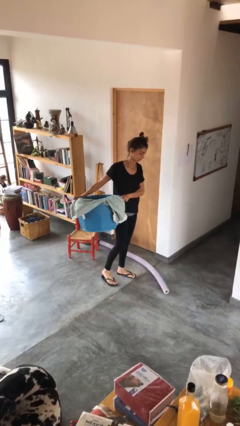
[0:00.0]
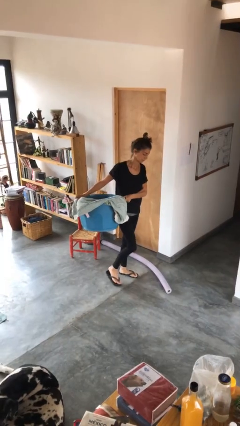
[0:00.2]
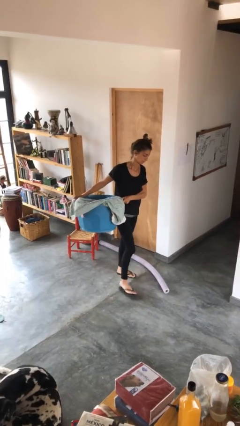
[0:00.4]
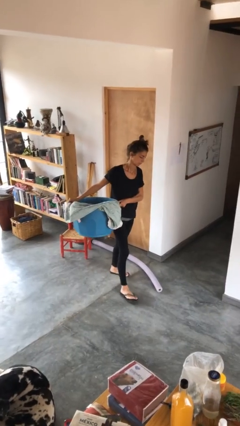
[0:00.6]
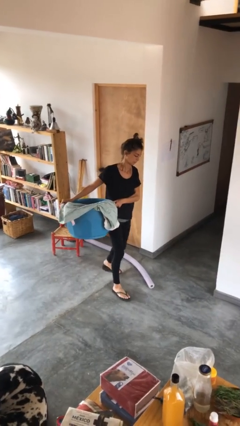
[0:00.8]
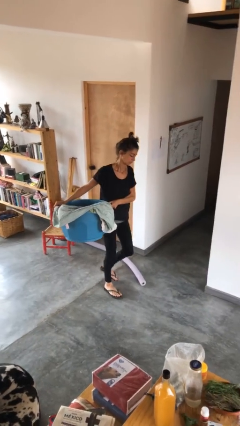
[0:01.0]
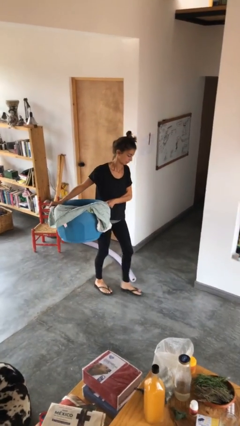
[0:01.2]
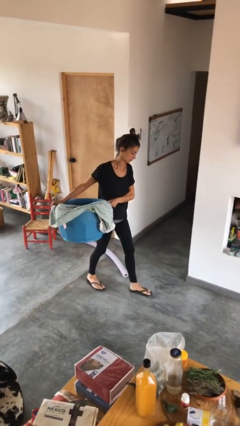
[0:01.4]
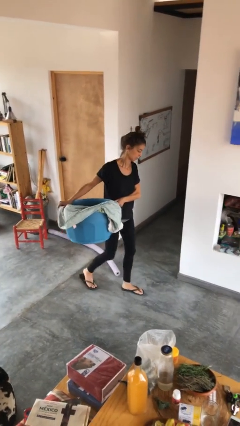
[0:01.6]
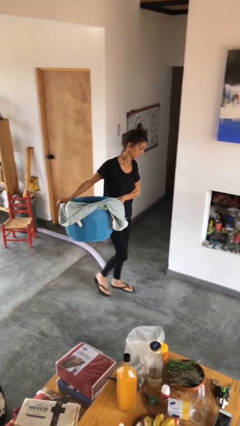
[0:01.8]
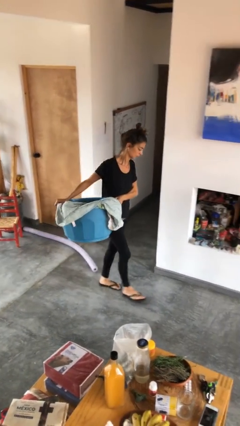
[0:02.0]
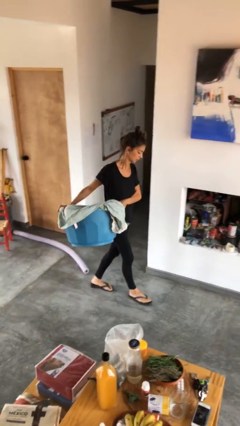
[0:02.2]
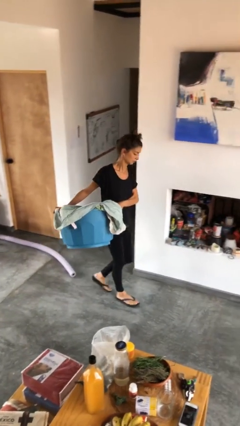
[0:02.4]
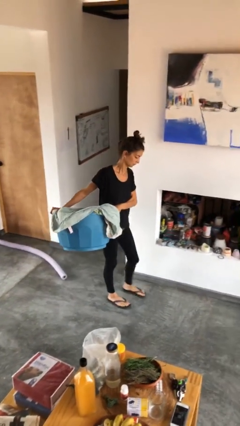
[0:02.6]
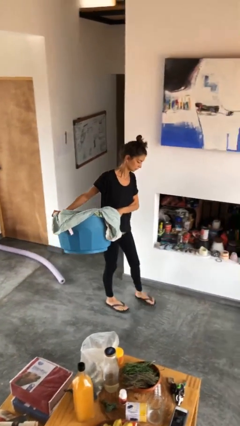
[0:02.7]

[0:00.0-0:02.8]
person carries laundry basket

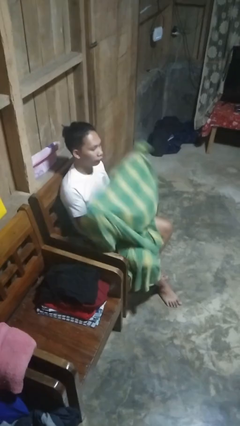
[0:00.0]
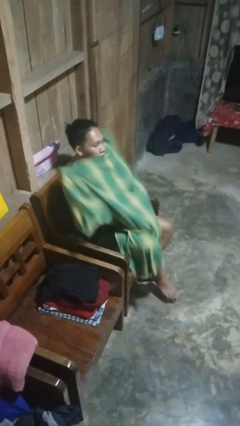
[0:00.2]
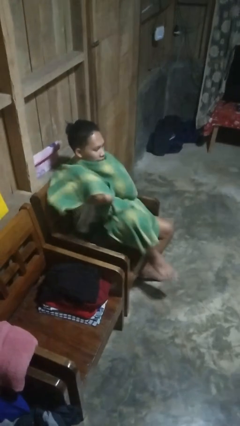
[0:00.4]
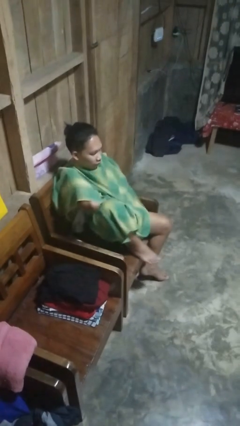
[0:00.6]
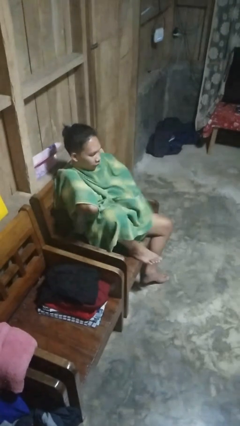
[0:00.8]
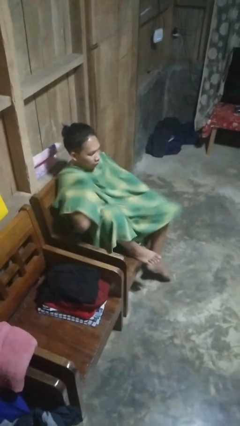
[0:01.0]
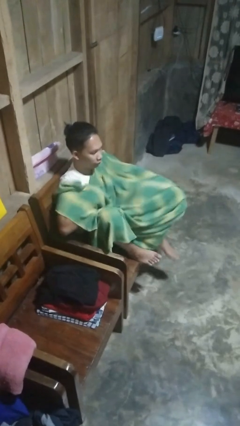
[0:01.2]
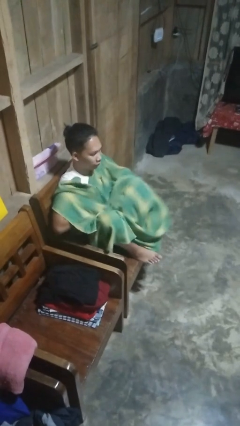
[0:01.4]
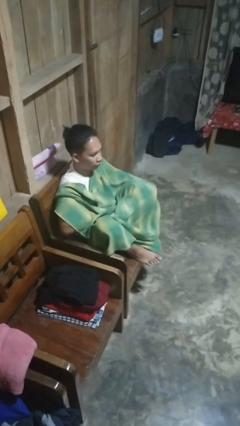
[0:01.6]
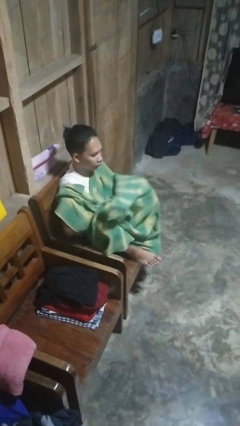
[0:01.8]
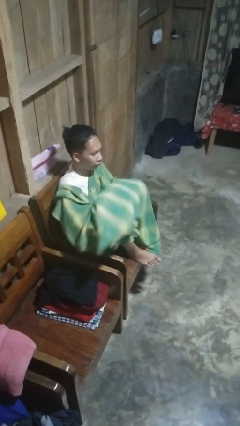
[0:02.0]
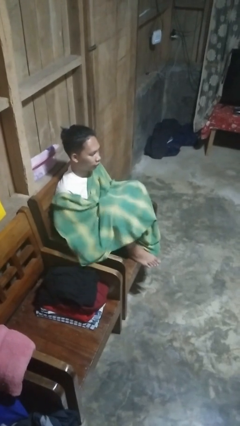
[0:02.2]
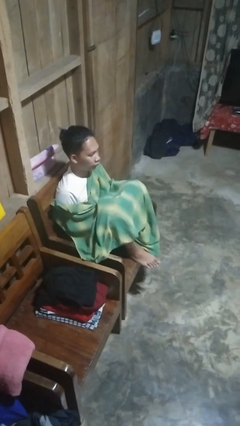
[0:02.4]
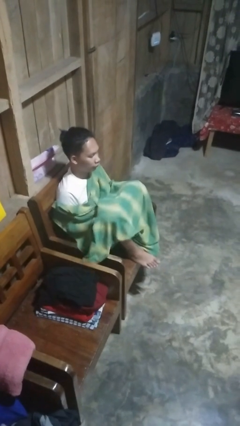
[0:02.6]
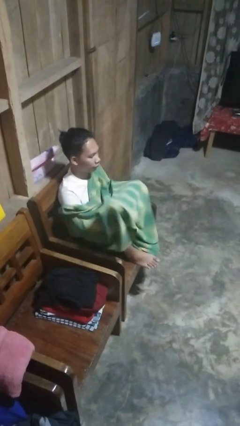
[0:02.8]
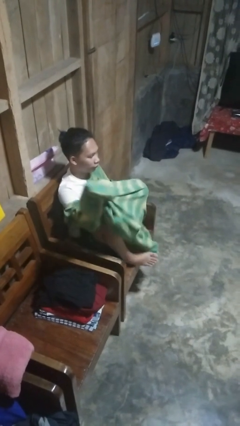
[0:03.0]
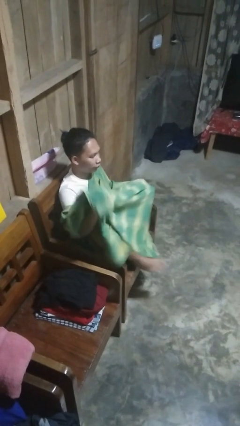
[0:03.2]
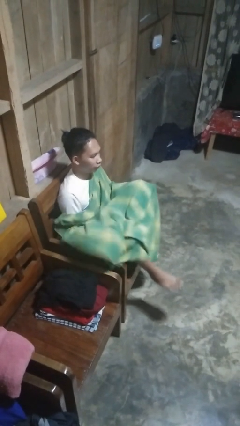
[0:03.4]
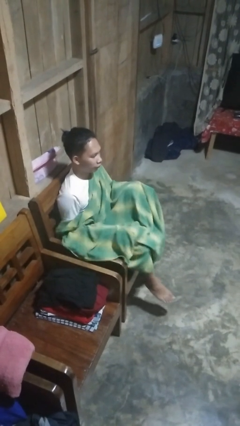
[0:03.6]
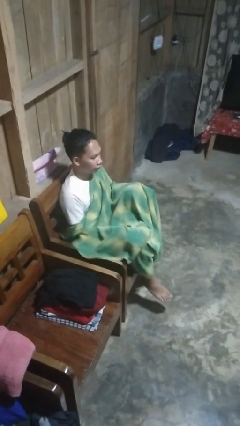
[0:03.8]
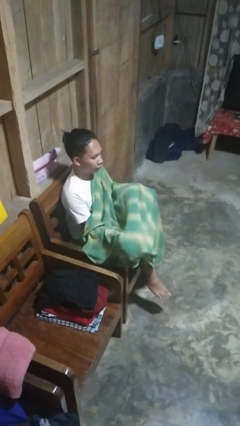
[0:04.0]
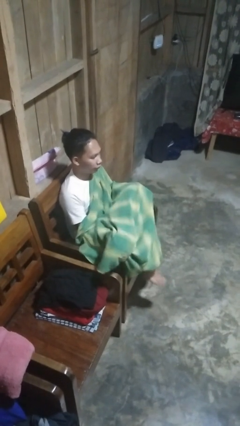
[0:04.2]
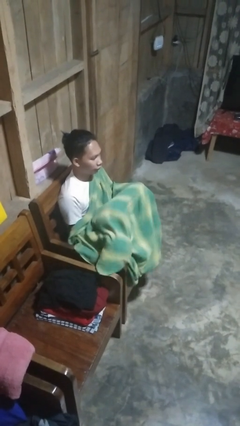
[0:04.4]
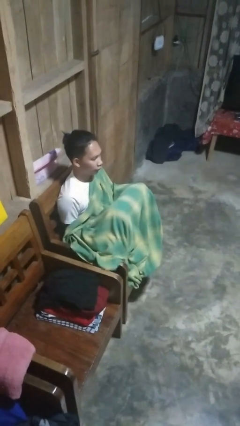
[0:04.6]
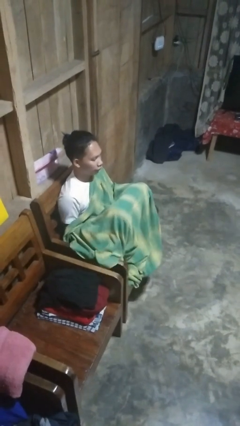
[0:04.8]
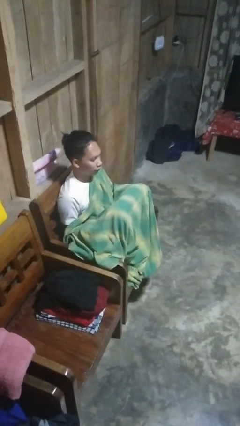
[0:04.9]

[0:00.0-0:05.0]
person covers with blanket

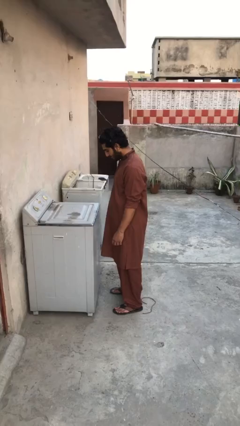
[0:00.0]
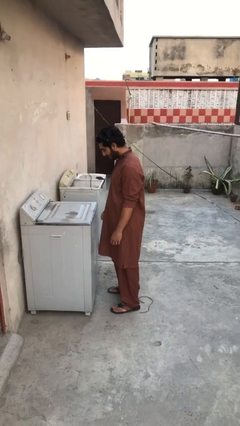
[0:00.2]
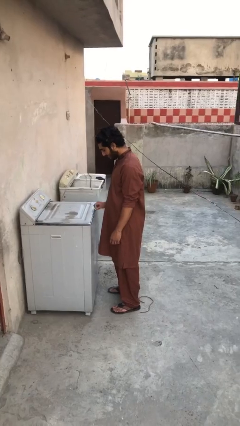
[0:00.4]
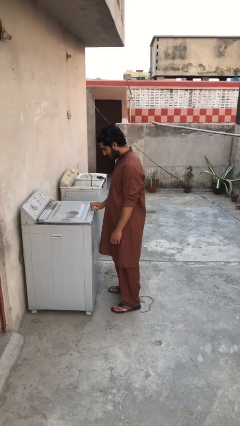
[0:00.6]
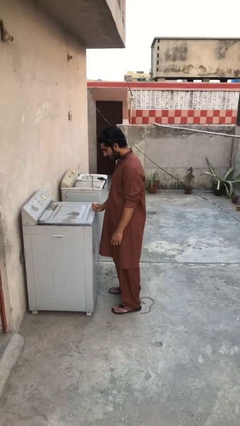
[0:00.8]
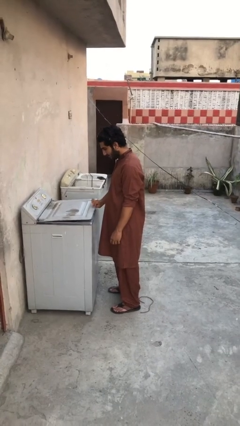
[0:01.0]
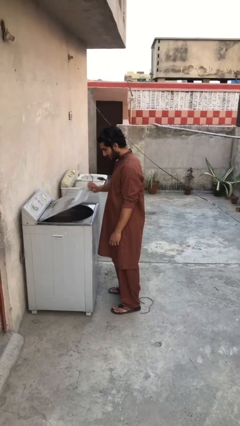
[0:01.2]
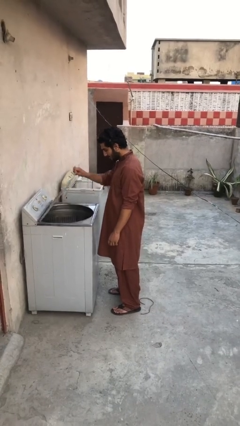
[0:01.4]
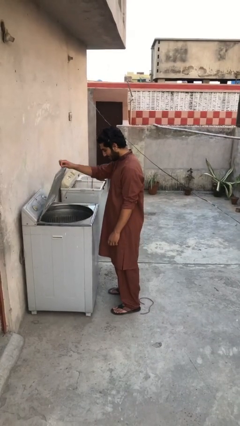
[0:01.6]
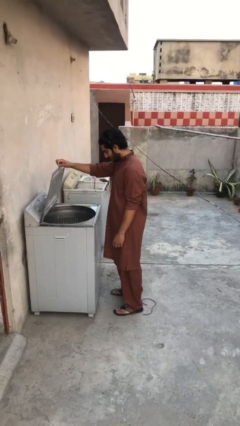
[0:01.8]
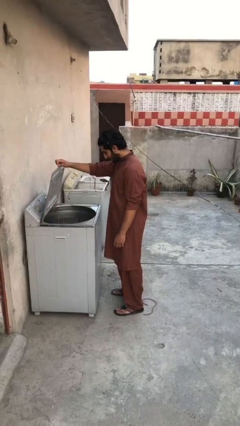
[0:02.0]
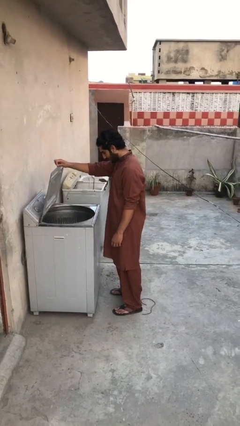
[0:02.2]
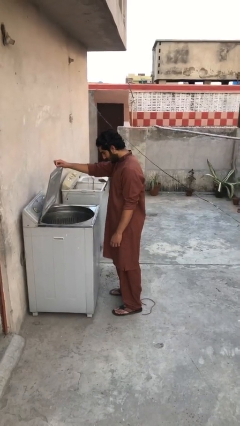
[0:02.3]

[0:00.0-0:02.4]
person opens clothes washer

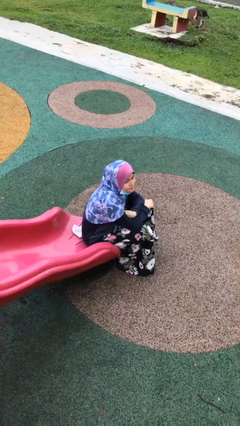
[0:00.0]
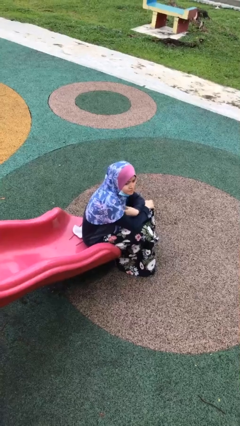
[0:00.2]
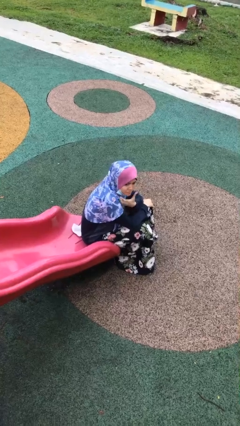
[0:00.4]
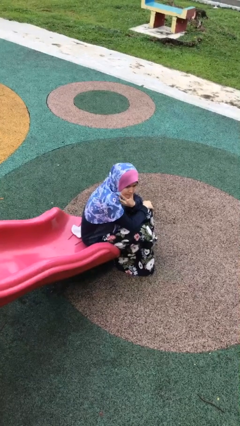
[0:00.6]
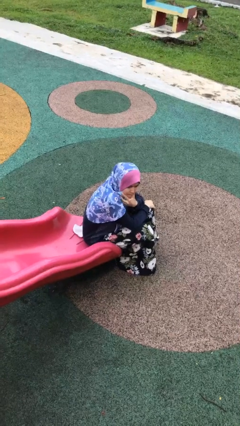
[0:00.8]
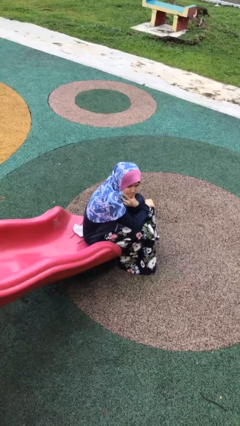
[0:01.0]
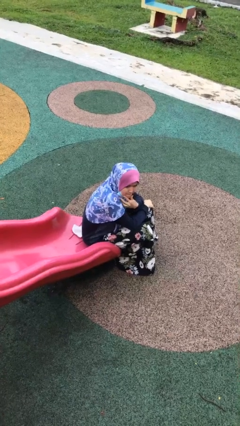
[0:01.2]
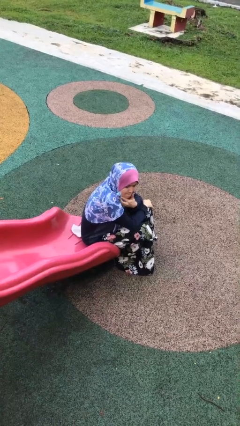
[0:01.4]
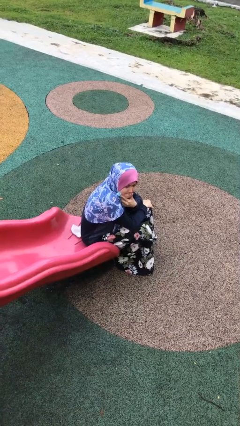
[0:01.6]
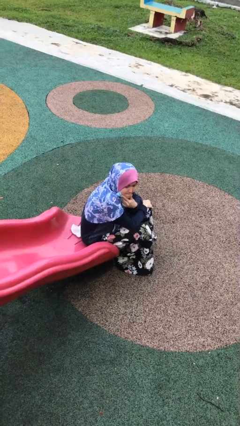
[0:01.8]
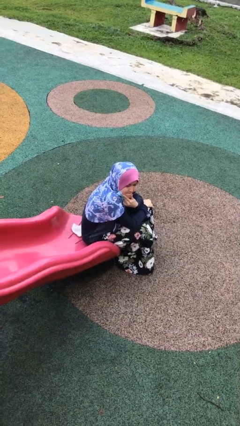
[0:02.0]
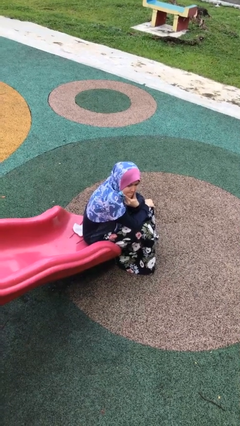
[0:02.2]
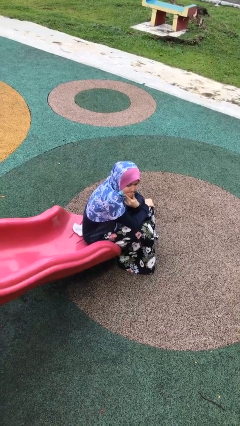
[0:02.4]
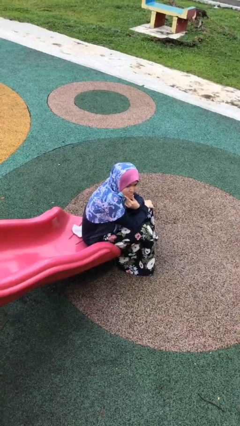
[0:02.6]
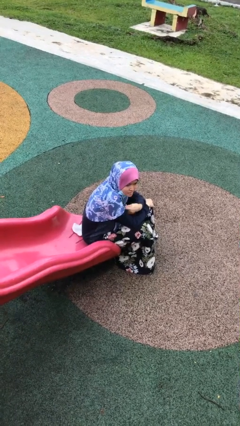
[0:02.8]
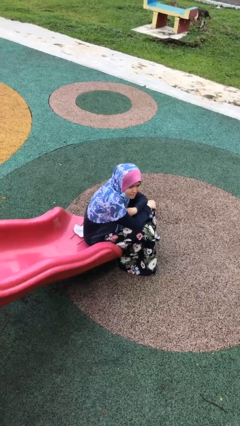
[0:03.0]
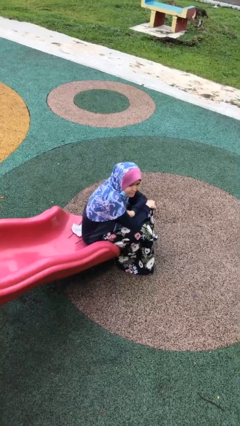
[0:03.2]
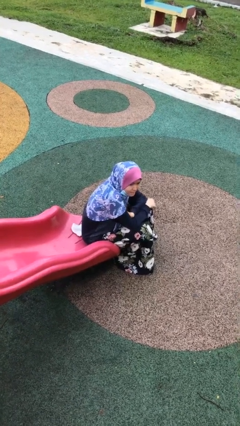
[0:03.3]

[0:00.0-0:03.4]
person strokes chin

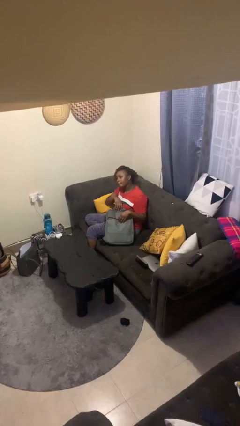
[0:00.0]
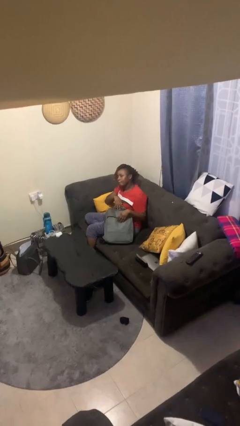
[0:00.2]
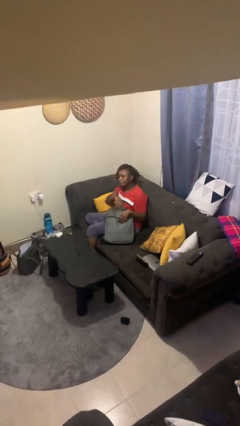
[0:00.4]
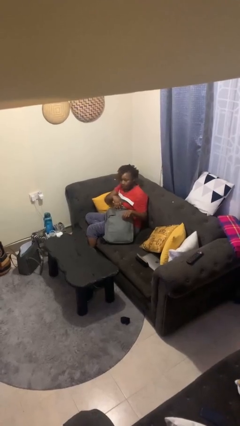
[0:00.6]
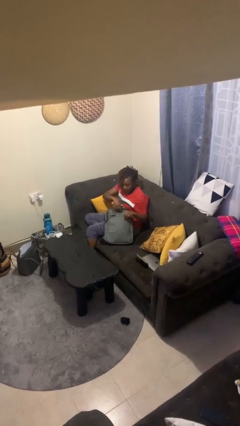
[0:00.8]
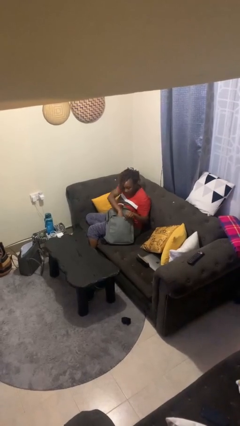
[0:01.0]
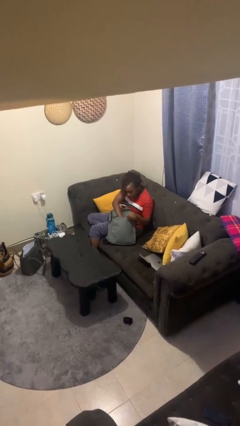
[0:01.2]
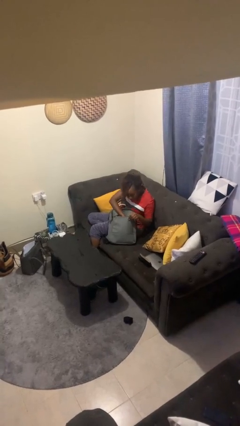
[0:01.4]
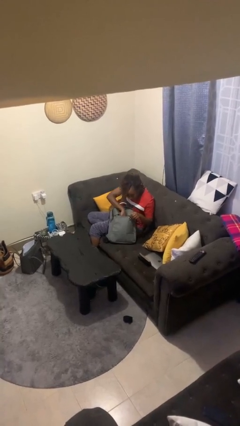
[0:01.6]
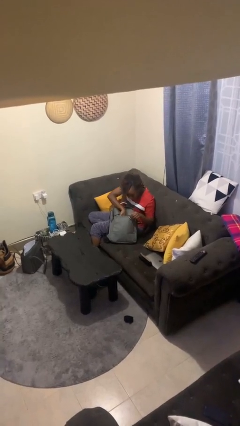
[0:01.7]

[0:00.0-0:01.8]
person searches in backpack

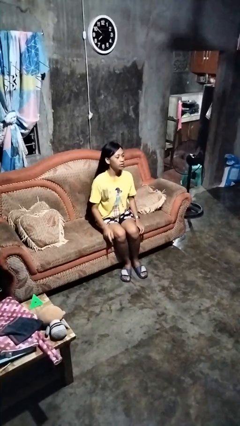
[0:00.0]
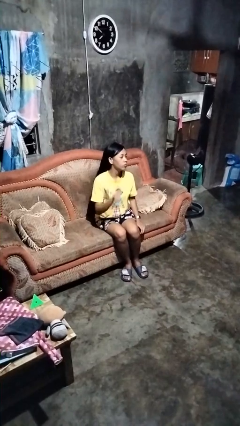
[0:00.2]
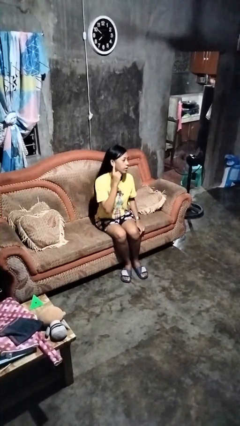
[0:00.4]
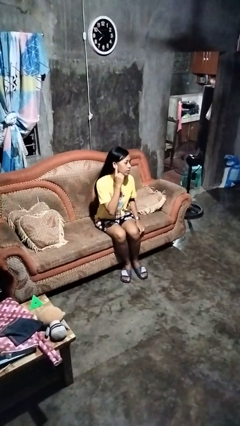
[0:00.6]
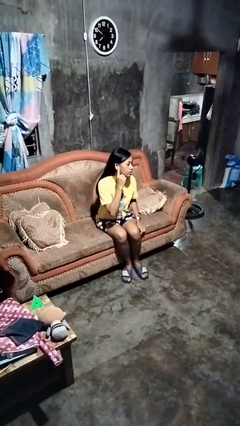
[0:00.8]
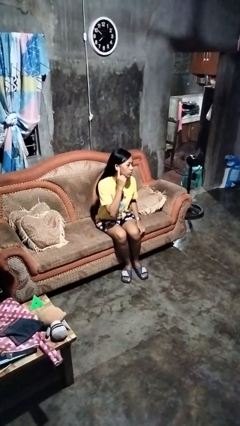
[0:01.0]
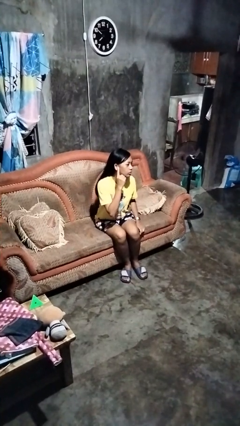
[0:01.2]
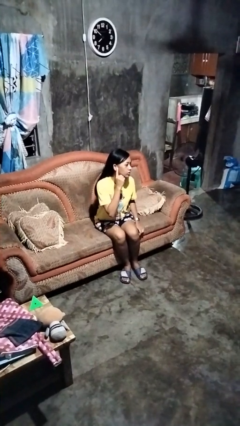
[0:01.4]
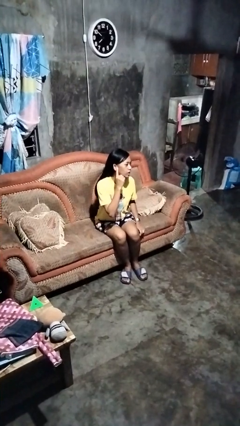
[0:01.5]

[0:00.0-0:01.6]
person gestures listen closely

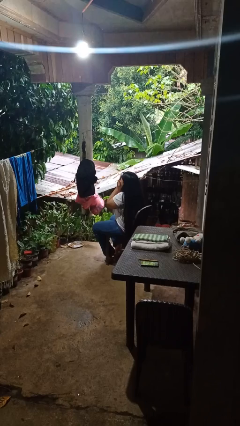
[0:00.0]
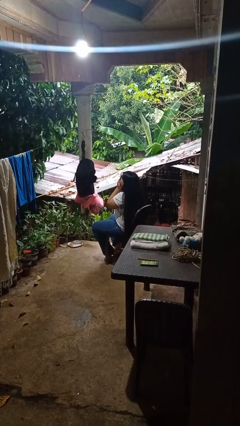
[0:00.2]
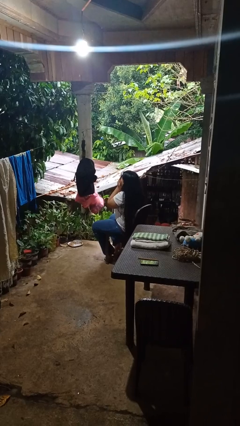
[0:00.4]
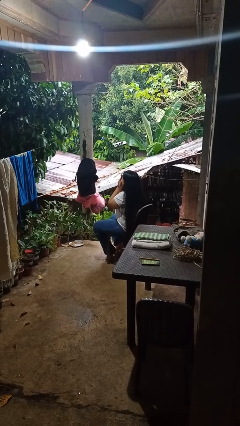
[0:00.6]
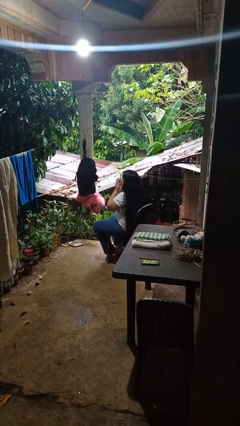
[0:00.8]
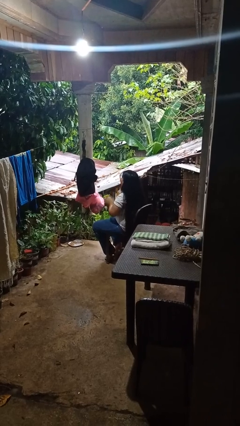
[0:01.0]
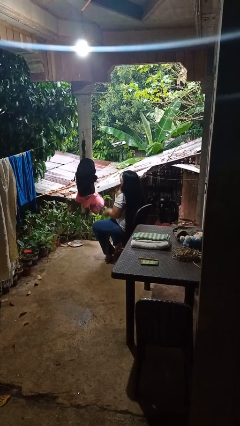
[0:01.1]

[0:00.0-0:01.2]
person covers face with hands
